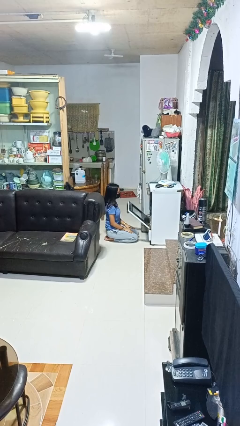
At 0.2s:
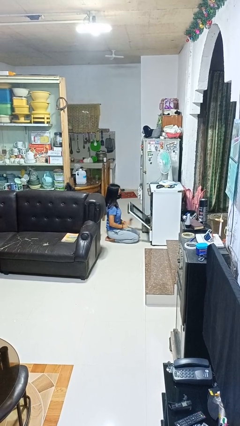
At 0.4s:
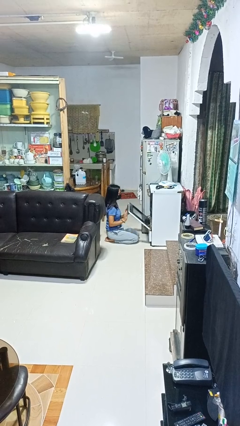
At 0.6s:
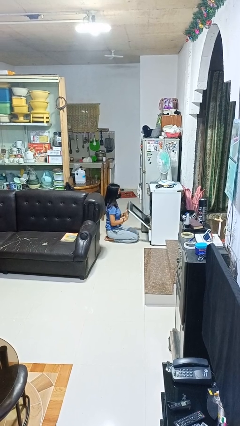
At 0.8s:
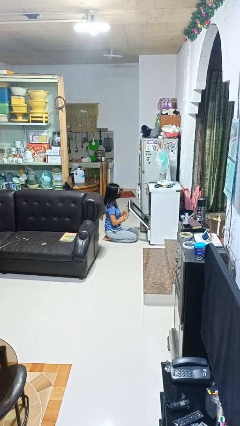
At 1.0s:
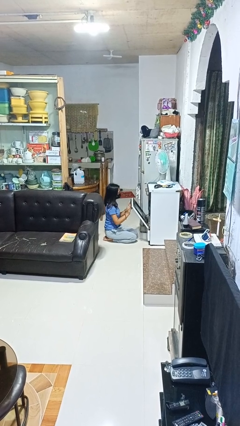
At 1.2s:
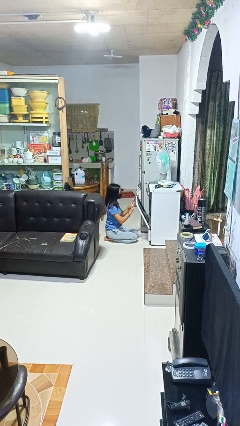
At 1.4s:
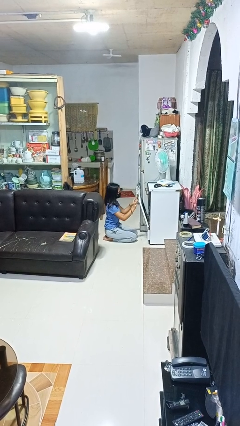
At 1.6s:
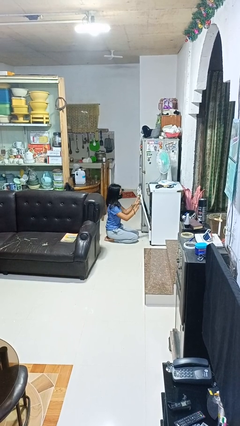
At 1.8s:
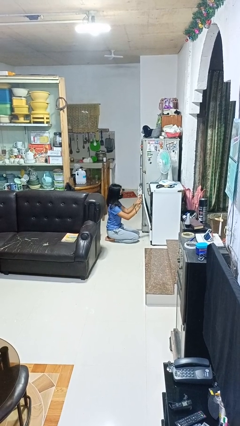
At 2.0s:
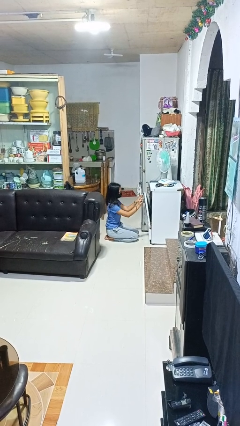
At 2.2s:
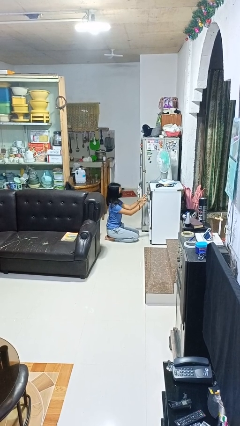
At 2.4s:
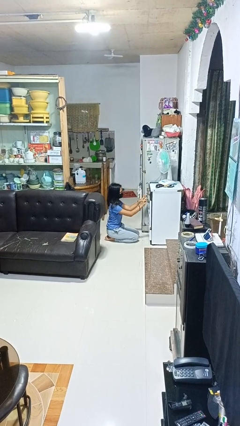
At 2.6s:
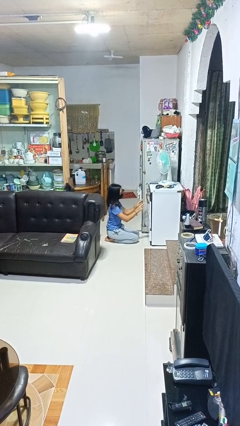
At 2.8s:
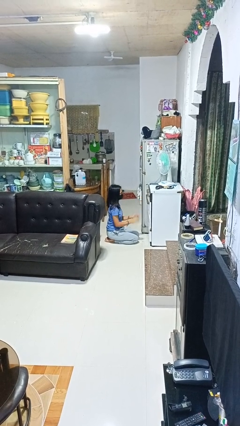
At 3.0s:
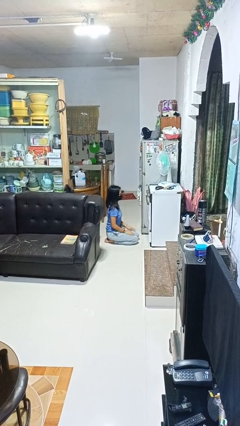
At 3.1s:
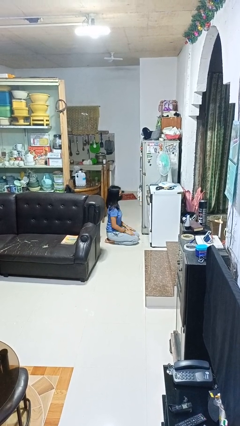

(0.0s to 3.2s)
person closes oven door

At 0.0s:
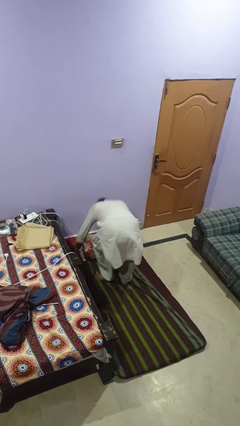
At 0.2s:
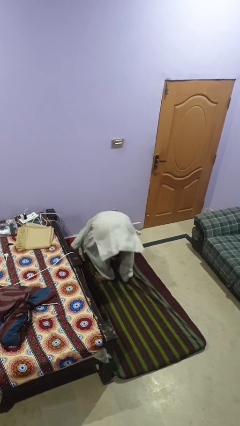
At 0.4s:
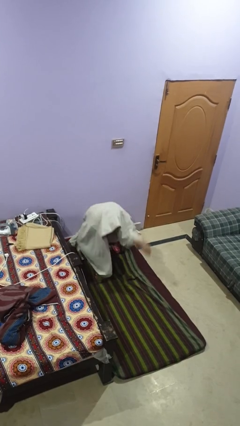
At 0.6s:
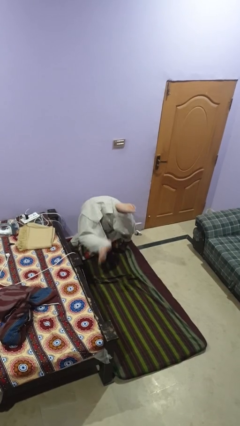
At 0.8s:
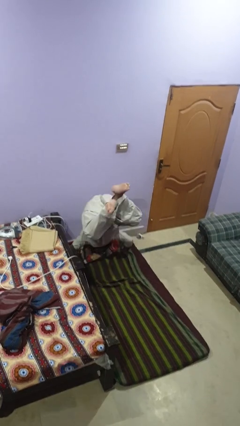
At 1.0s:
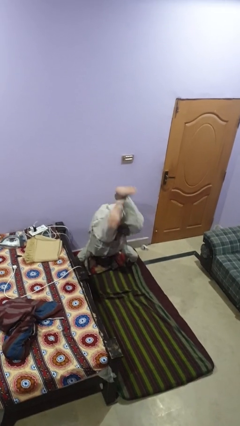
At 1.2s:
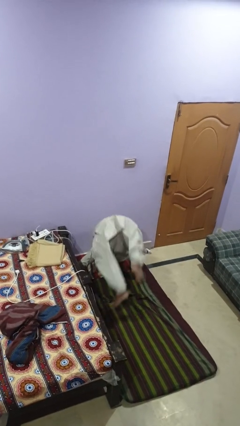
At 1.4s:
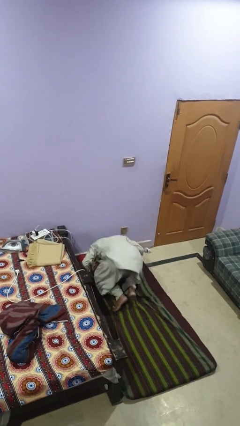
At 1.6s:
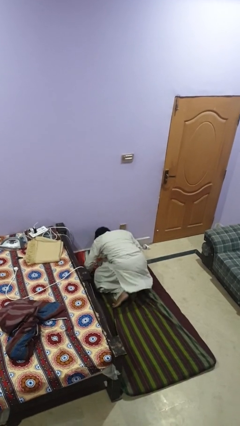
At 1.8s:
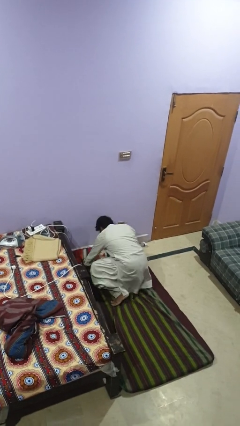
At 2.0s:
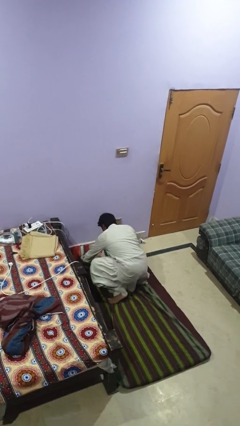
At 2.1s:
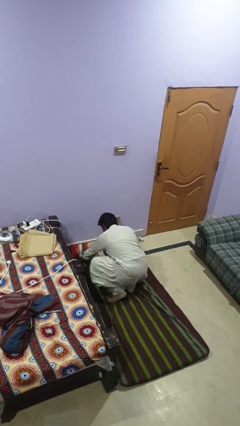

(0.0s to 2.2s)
person handstand

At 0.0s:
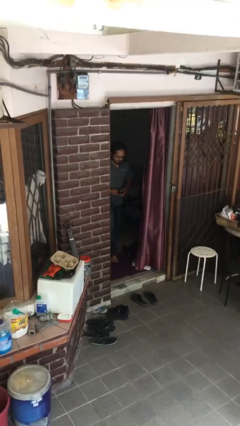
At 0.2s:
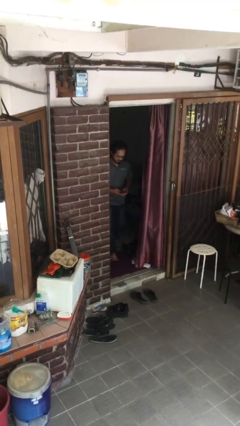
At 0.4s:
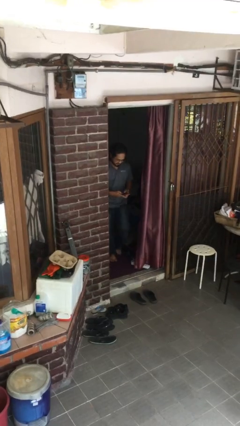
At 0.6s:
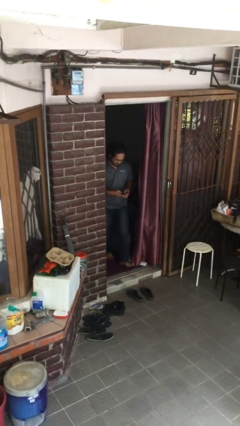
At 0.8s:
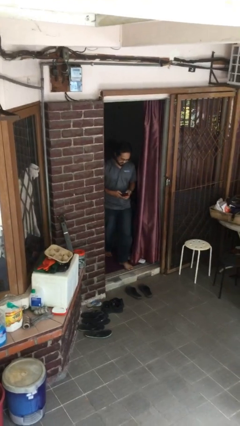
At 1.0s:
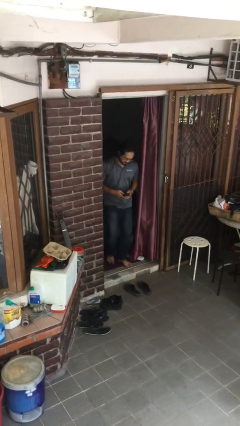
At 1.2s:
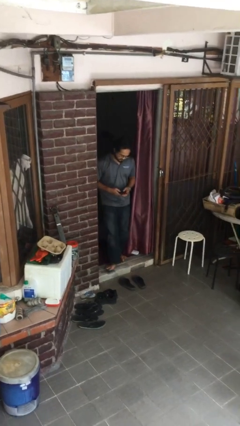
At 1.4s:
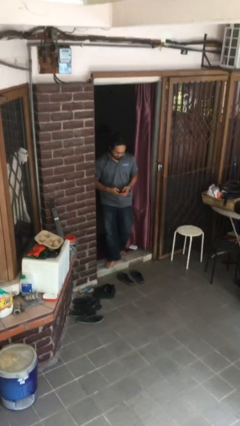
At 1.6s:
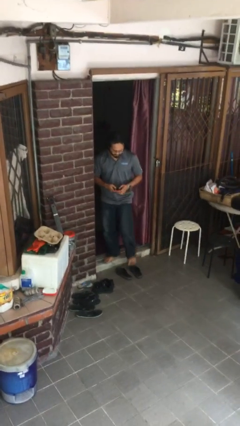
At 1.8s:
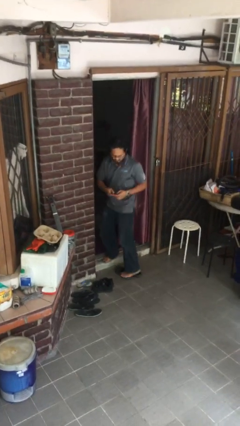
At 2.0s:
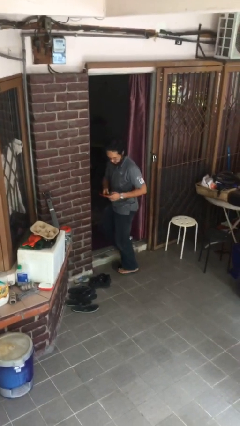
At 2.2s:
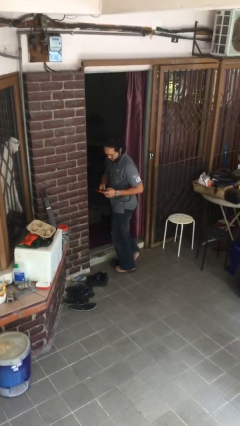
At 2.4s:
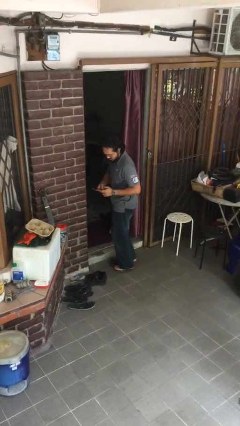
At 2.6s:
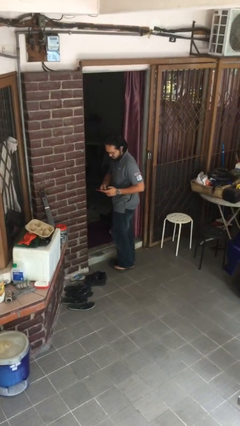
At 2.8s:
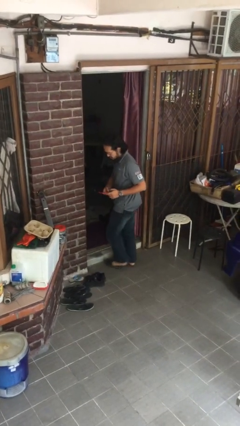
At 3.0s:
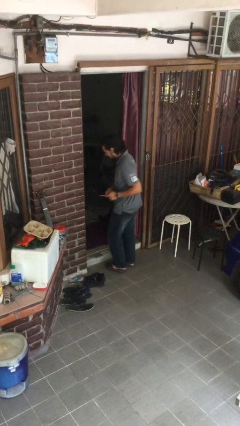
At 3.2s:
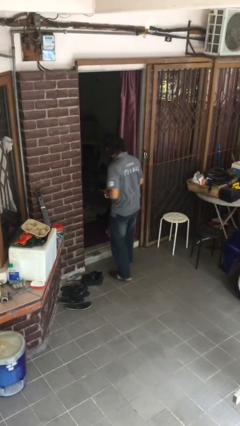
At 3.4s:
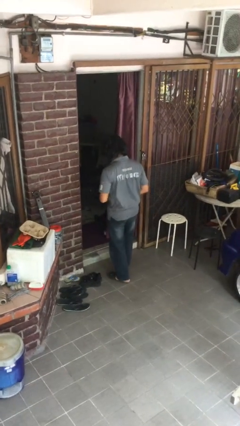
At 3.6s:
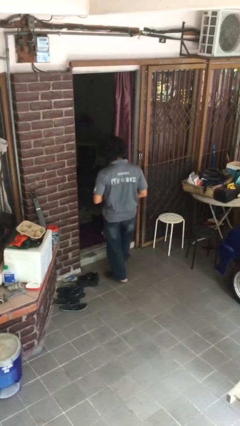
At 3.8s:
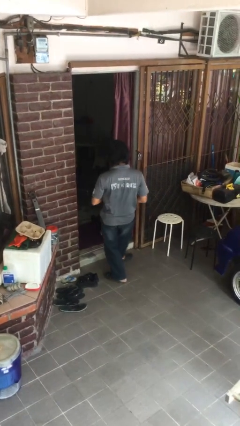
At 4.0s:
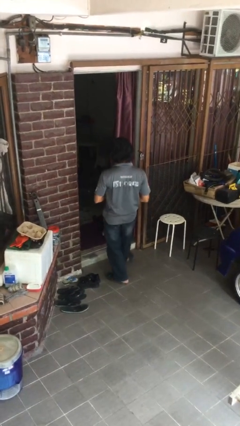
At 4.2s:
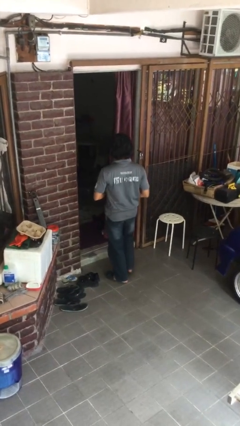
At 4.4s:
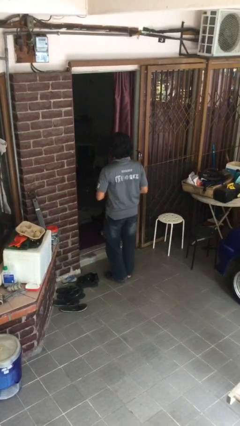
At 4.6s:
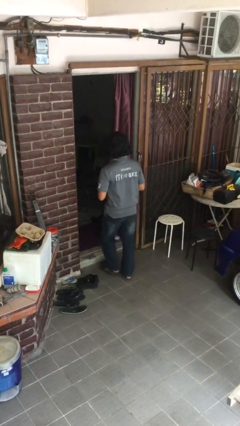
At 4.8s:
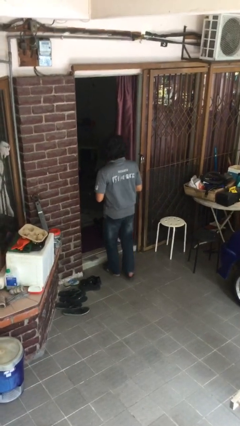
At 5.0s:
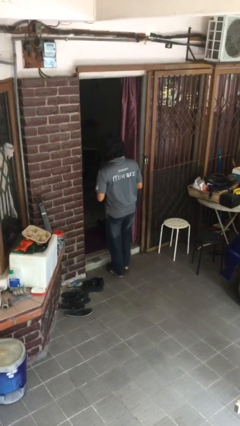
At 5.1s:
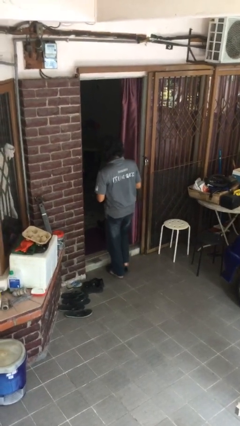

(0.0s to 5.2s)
person enters scene through structure

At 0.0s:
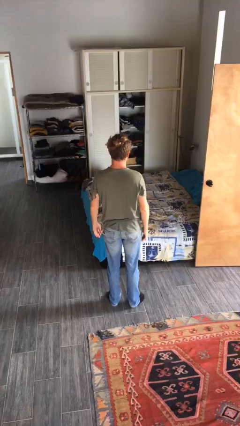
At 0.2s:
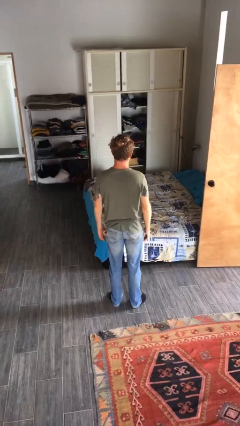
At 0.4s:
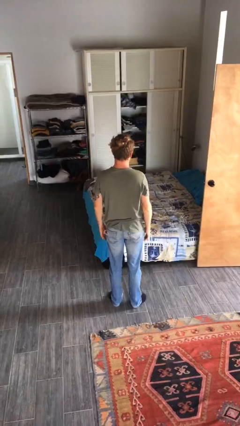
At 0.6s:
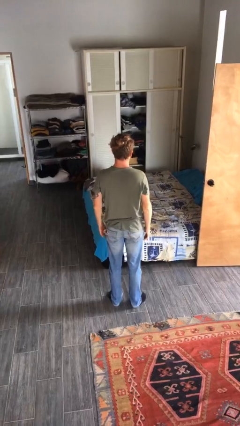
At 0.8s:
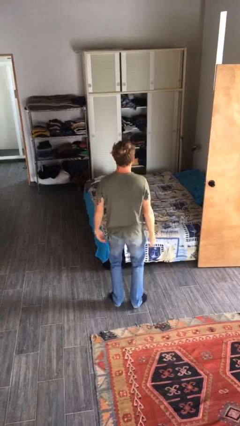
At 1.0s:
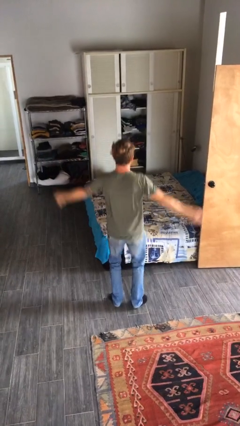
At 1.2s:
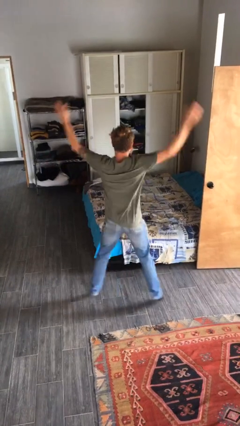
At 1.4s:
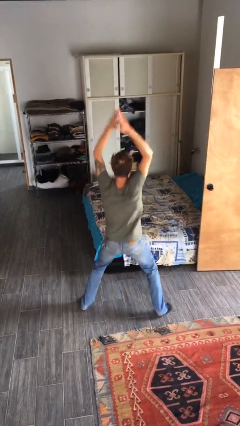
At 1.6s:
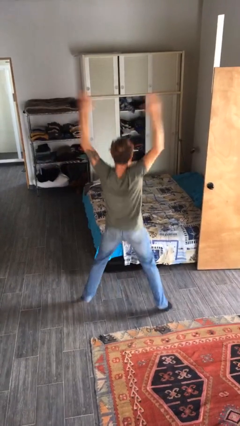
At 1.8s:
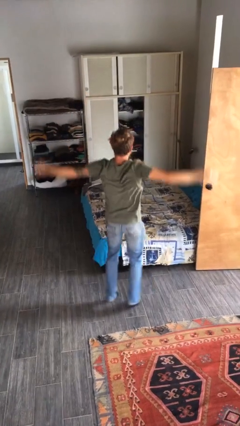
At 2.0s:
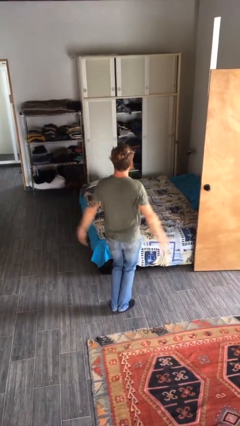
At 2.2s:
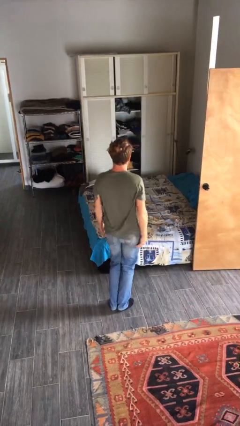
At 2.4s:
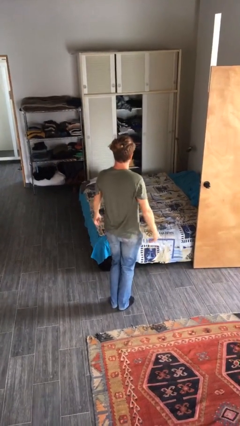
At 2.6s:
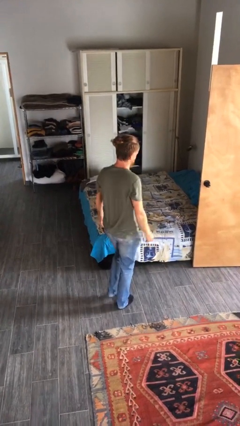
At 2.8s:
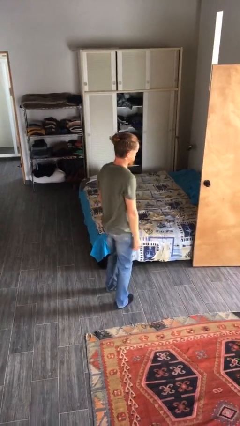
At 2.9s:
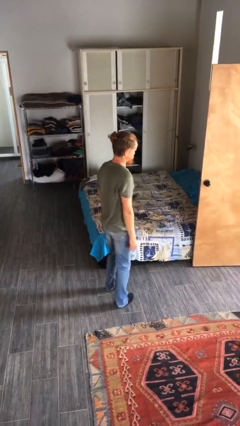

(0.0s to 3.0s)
person exercises with jumping jacks

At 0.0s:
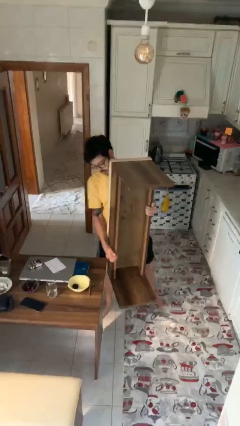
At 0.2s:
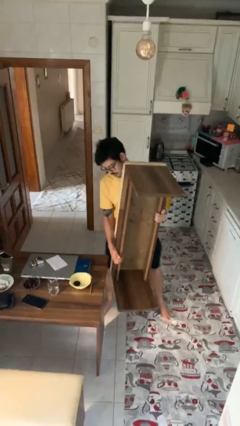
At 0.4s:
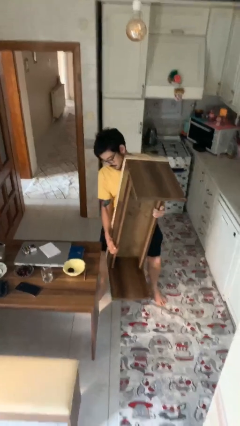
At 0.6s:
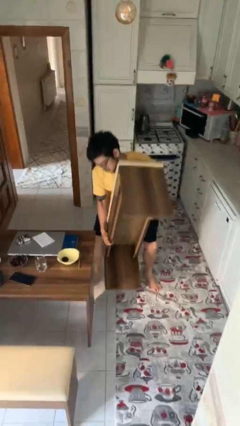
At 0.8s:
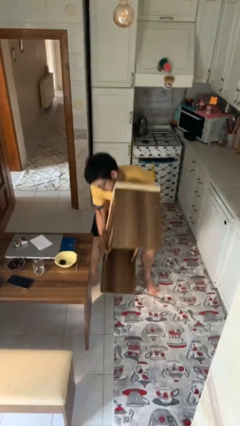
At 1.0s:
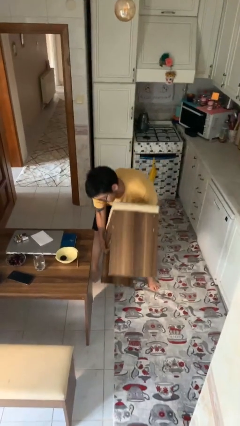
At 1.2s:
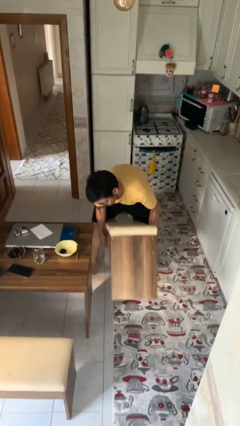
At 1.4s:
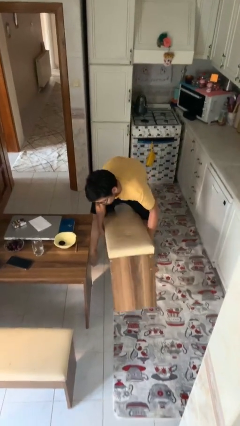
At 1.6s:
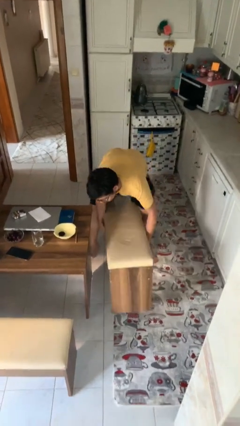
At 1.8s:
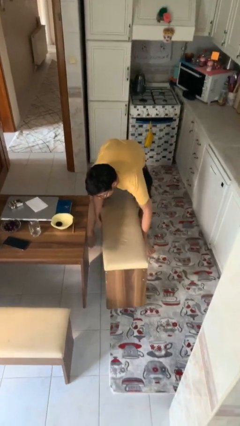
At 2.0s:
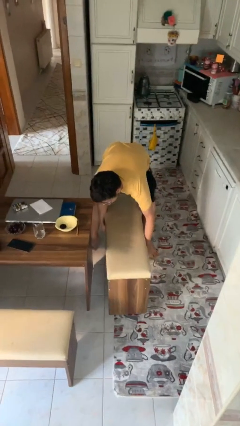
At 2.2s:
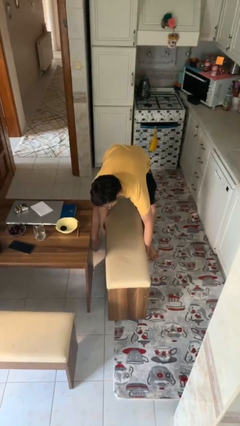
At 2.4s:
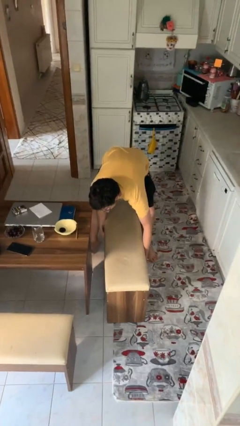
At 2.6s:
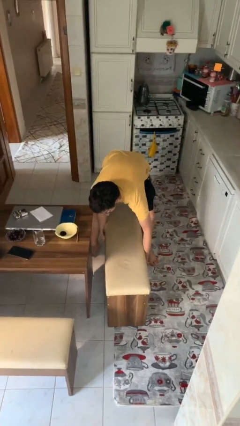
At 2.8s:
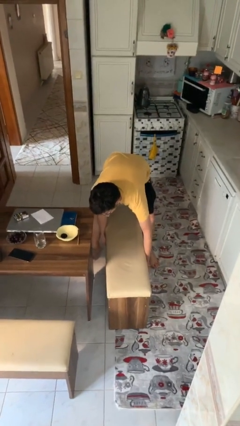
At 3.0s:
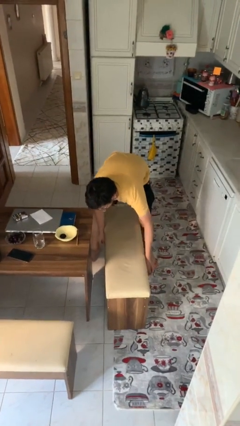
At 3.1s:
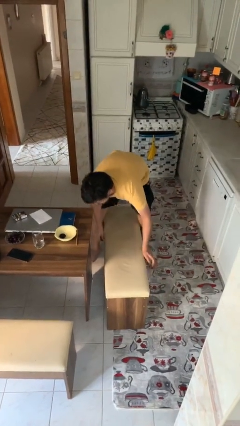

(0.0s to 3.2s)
person puts down object on floor

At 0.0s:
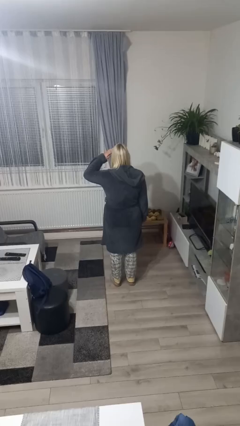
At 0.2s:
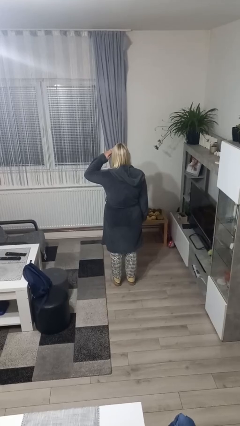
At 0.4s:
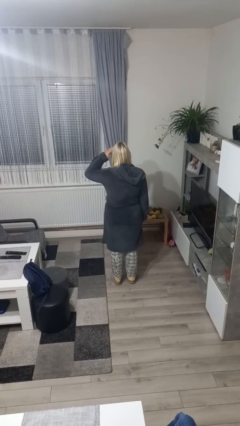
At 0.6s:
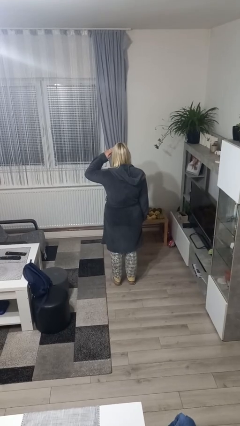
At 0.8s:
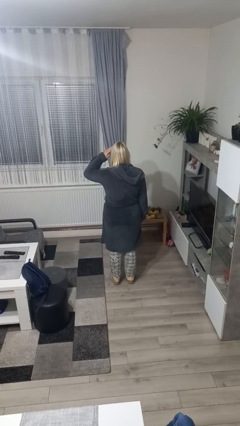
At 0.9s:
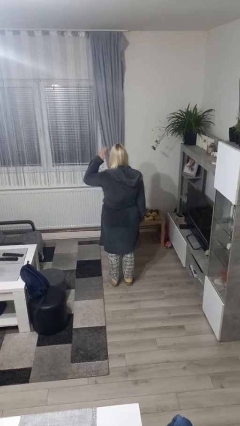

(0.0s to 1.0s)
person salutes
